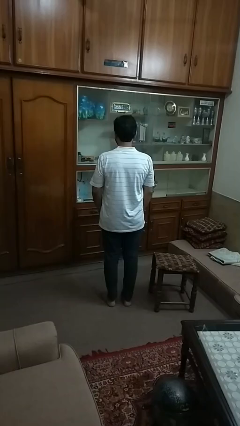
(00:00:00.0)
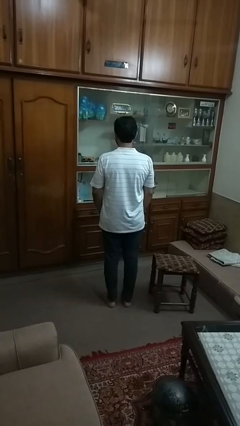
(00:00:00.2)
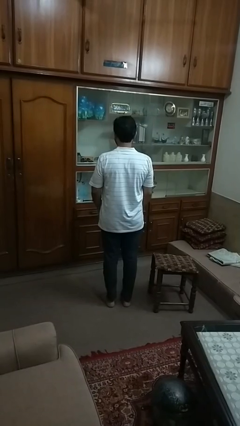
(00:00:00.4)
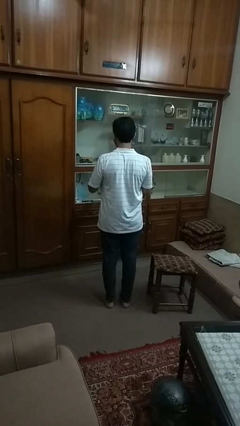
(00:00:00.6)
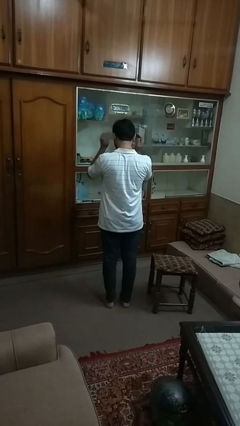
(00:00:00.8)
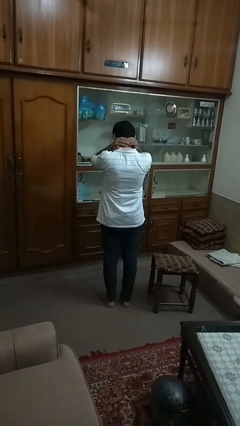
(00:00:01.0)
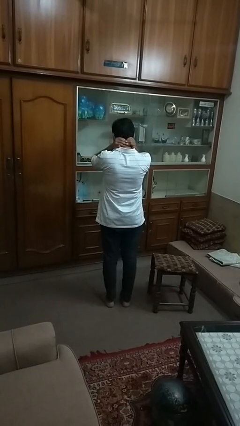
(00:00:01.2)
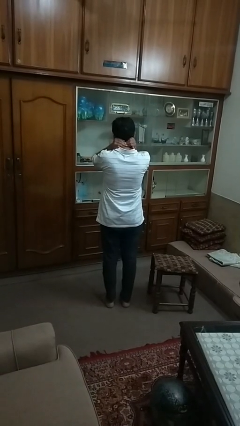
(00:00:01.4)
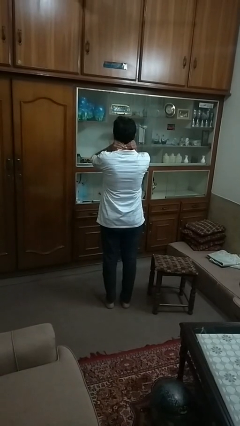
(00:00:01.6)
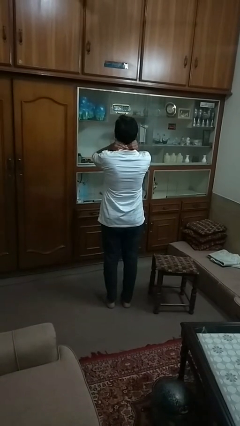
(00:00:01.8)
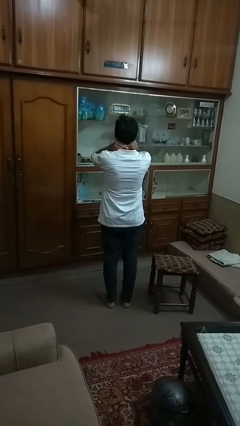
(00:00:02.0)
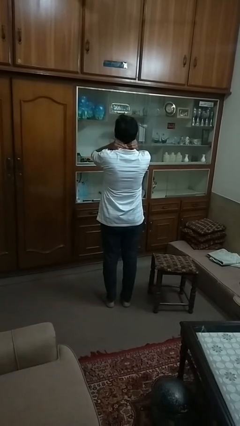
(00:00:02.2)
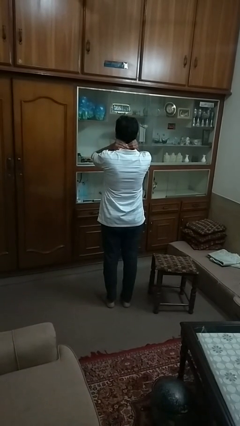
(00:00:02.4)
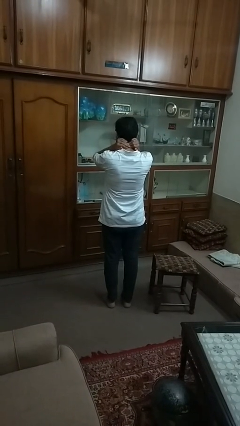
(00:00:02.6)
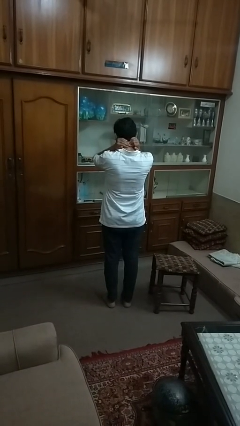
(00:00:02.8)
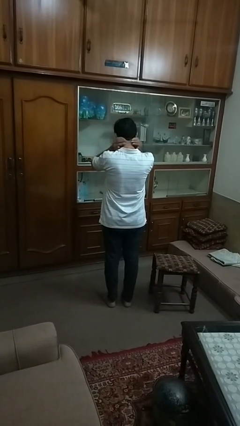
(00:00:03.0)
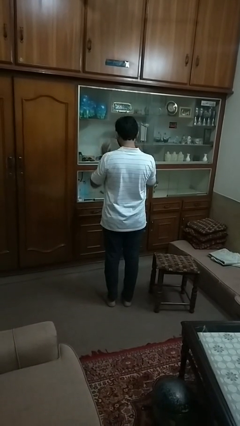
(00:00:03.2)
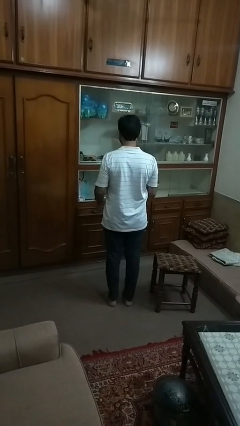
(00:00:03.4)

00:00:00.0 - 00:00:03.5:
person rubs neck

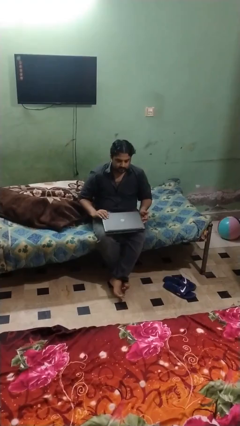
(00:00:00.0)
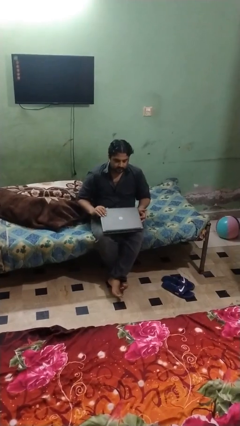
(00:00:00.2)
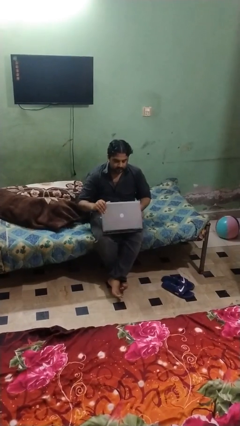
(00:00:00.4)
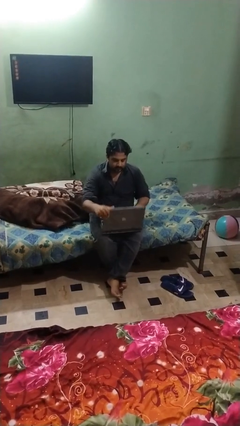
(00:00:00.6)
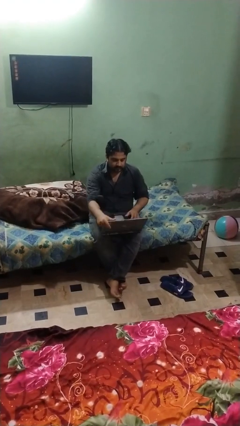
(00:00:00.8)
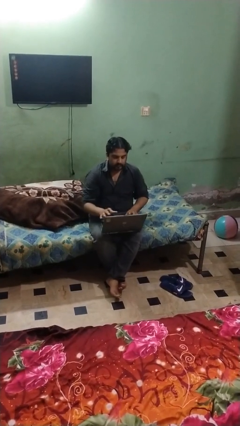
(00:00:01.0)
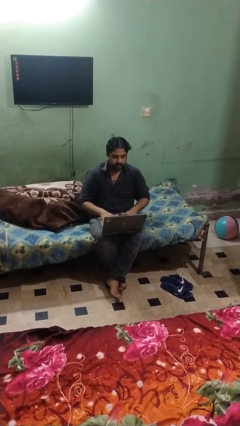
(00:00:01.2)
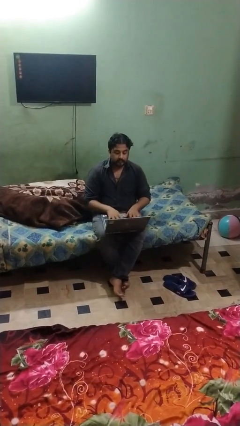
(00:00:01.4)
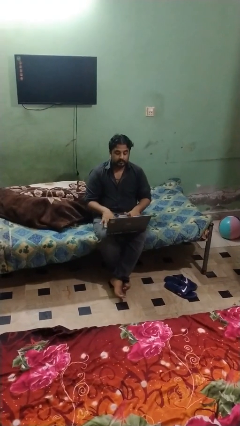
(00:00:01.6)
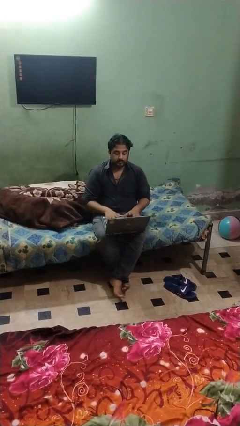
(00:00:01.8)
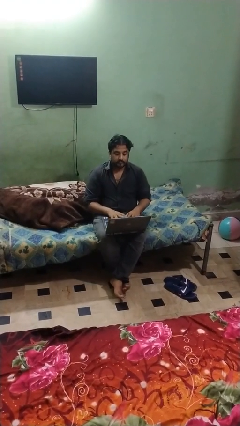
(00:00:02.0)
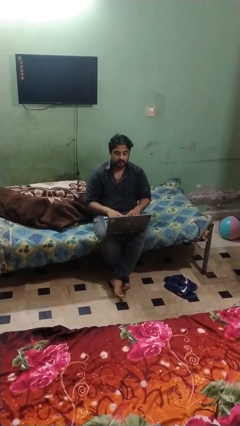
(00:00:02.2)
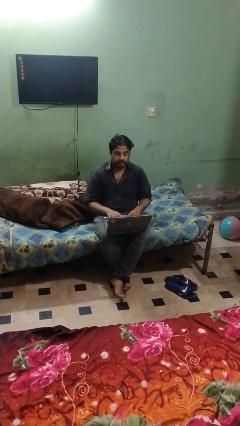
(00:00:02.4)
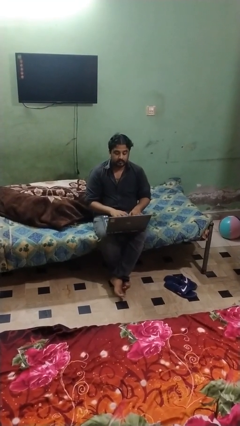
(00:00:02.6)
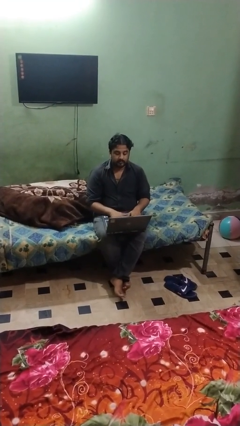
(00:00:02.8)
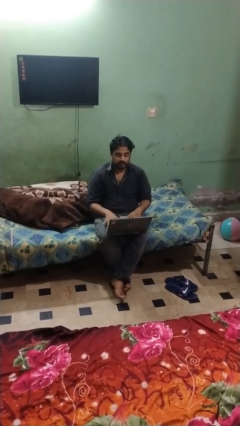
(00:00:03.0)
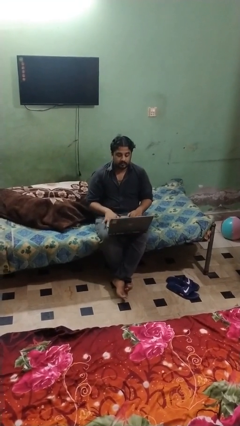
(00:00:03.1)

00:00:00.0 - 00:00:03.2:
person opens laptop

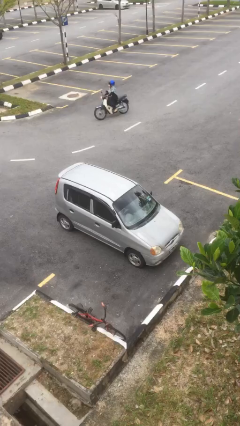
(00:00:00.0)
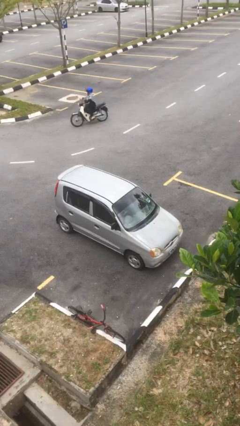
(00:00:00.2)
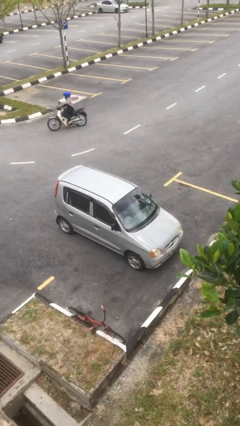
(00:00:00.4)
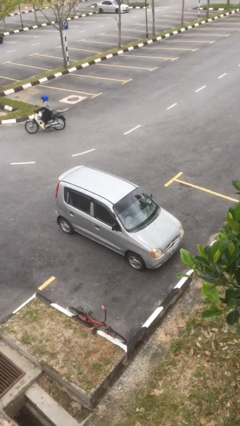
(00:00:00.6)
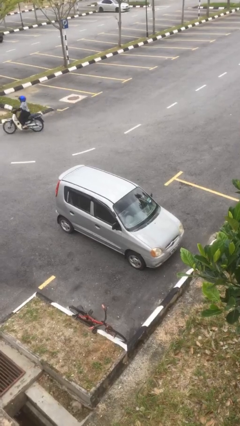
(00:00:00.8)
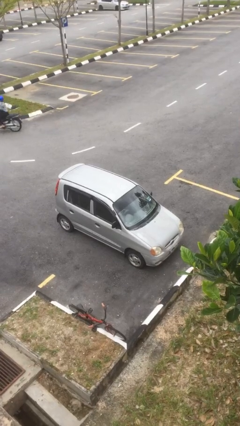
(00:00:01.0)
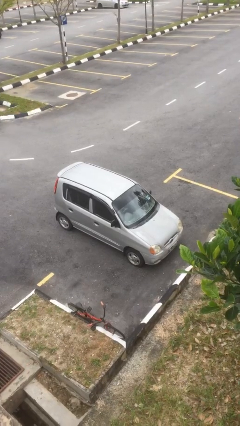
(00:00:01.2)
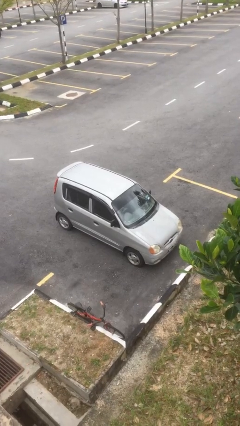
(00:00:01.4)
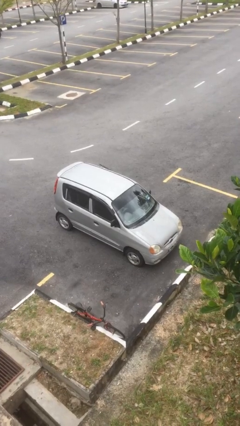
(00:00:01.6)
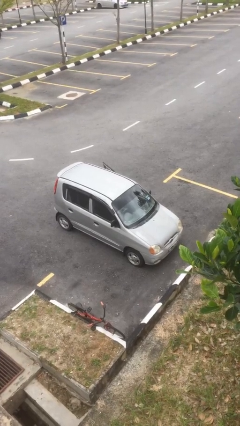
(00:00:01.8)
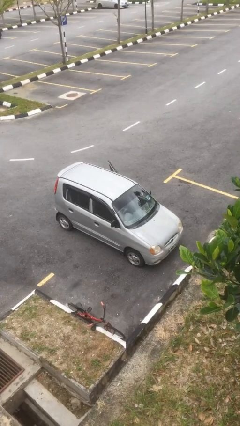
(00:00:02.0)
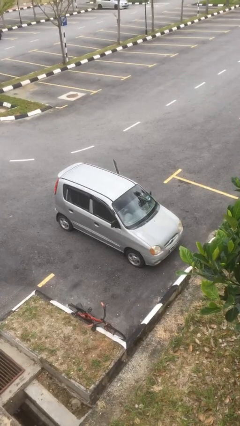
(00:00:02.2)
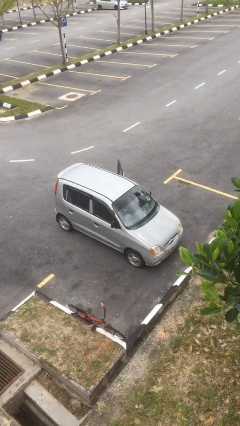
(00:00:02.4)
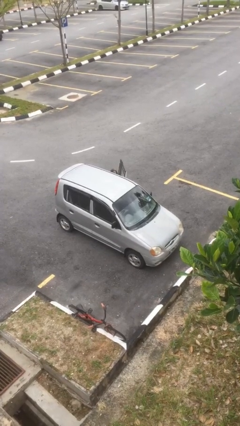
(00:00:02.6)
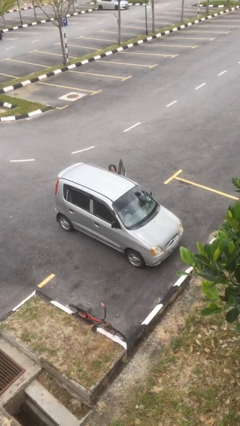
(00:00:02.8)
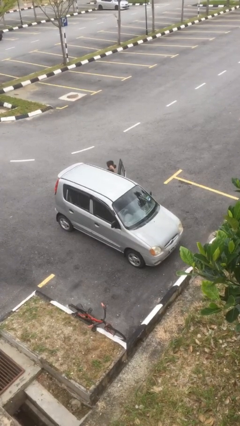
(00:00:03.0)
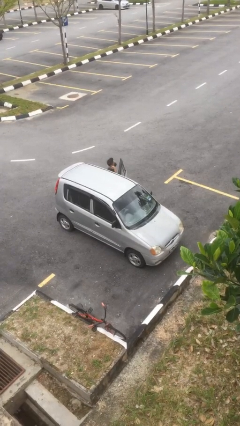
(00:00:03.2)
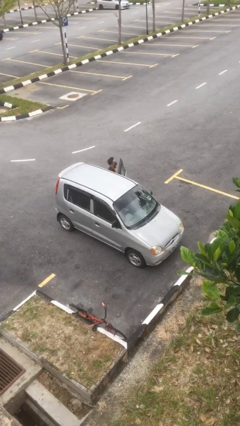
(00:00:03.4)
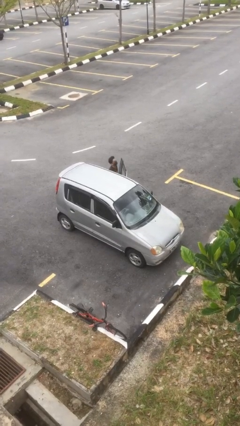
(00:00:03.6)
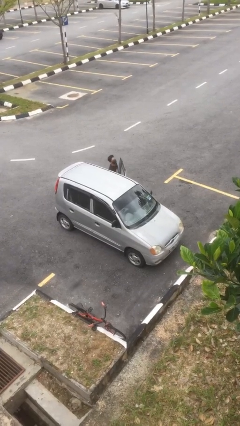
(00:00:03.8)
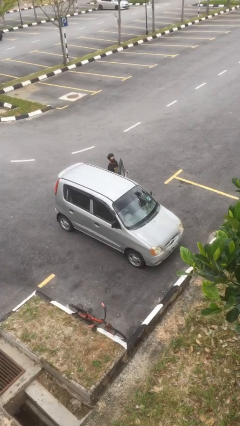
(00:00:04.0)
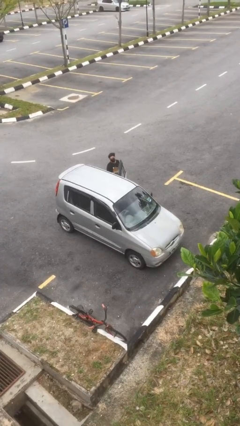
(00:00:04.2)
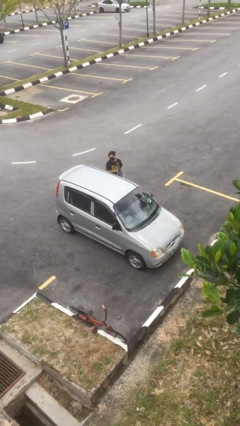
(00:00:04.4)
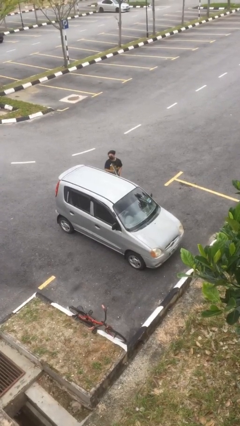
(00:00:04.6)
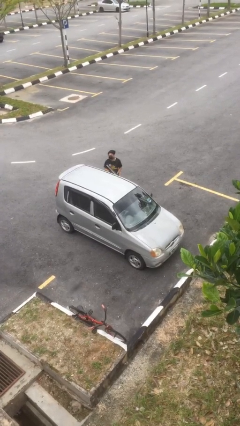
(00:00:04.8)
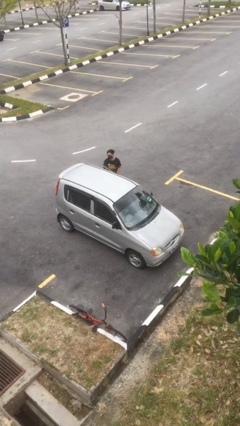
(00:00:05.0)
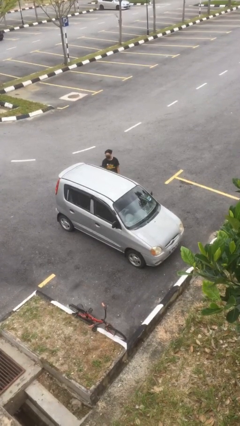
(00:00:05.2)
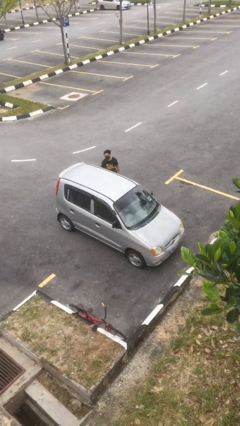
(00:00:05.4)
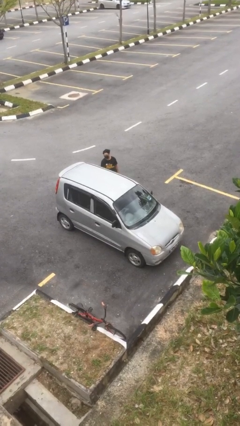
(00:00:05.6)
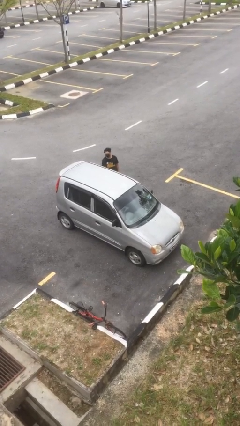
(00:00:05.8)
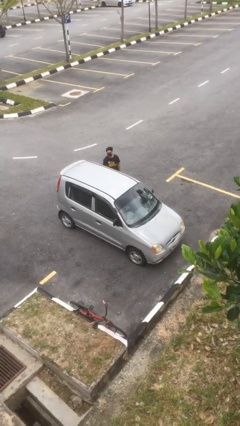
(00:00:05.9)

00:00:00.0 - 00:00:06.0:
car drops off person

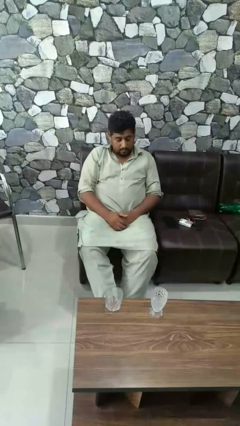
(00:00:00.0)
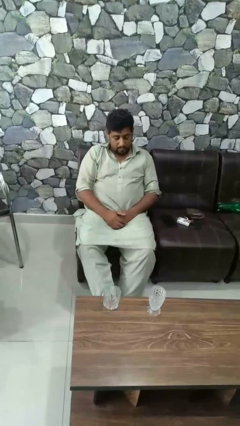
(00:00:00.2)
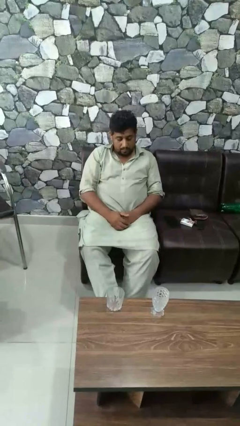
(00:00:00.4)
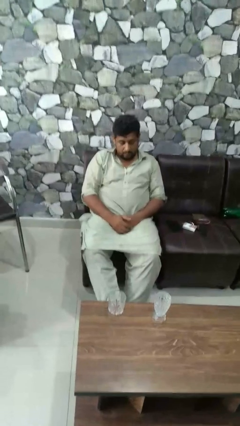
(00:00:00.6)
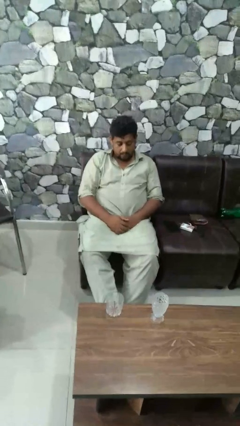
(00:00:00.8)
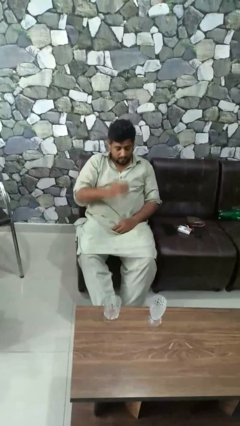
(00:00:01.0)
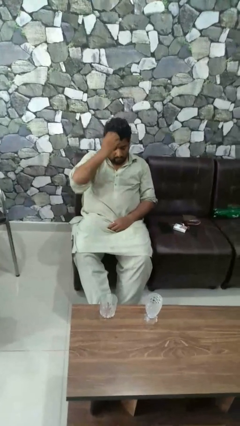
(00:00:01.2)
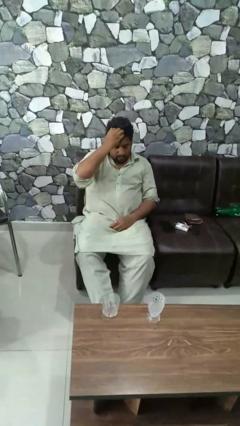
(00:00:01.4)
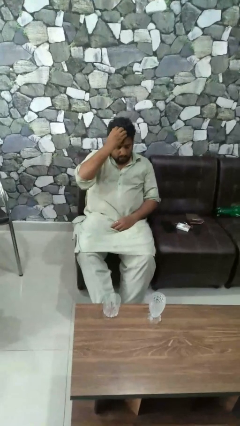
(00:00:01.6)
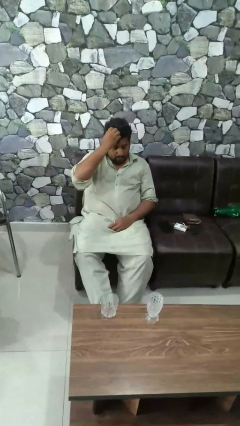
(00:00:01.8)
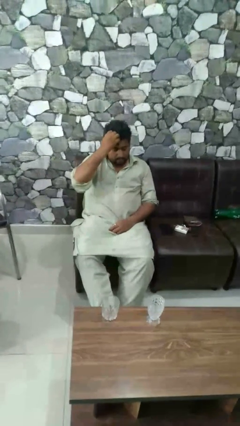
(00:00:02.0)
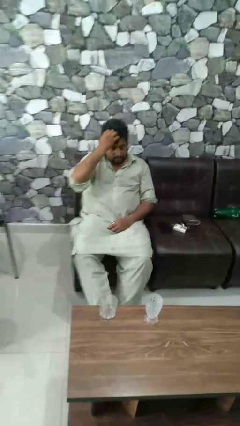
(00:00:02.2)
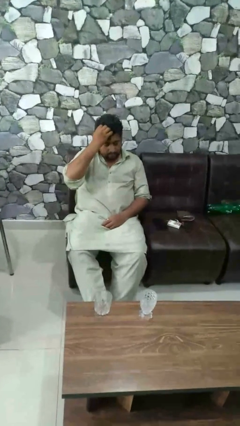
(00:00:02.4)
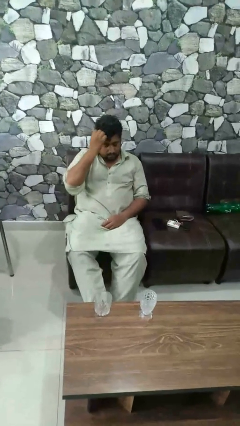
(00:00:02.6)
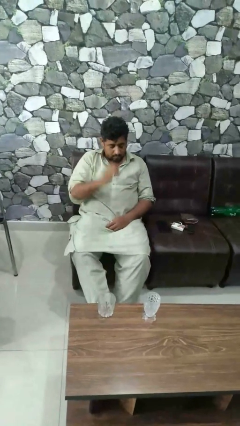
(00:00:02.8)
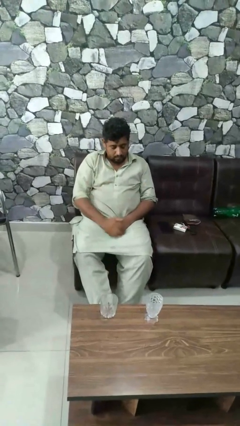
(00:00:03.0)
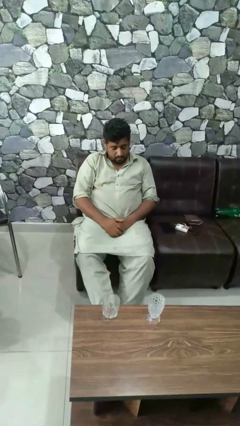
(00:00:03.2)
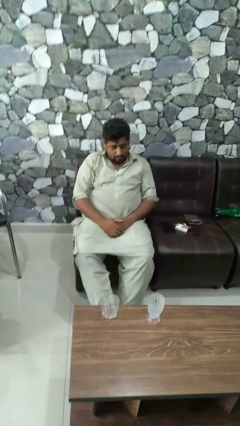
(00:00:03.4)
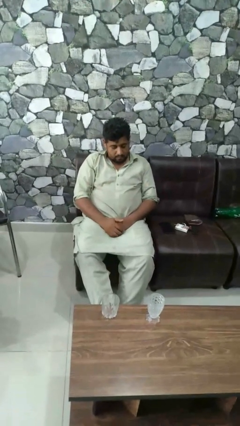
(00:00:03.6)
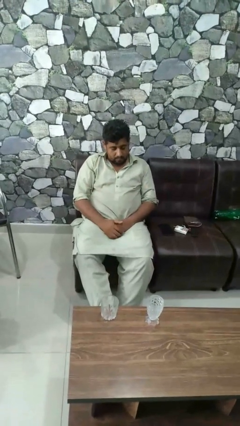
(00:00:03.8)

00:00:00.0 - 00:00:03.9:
person scratches face

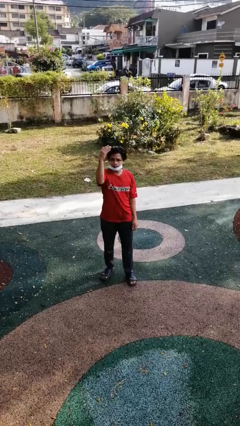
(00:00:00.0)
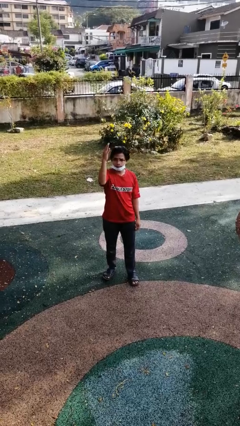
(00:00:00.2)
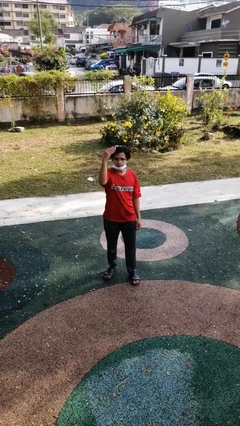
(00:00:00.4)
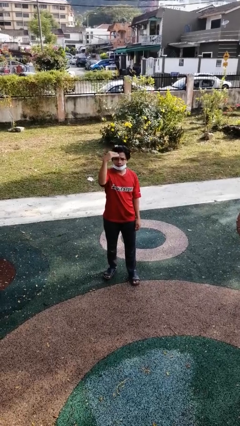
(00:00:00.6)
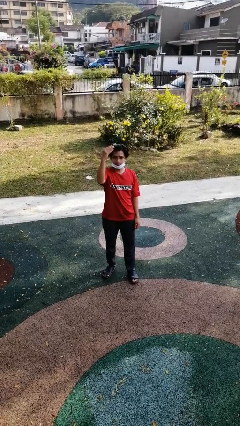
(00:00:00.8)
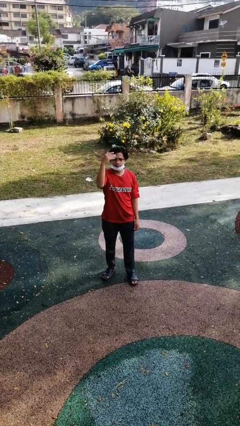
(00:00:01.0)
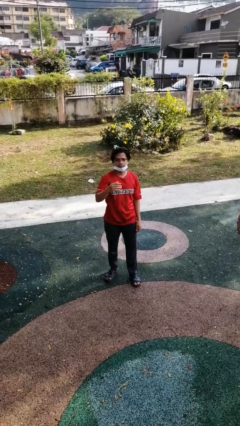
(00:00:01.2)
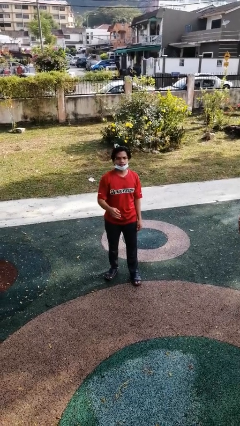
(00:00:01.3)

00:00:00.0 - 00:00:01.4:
person gestures come here
